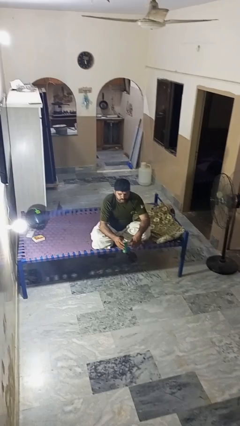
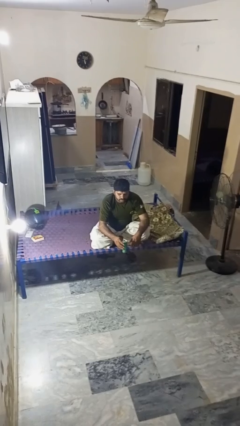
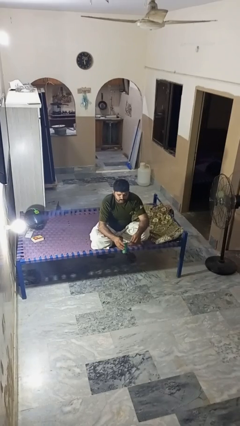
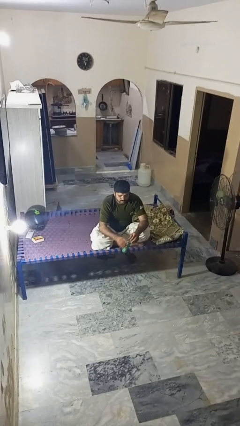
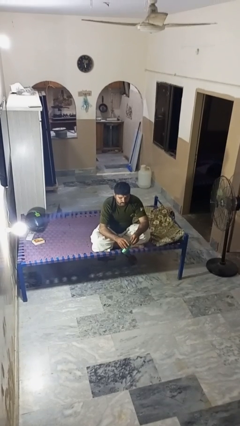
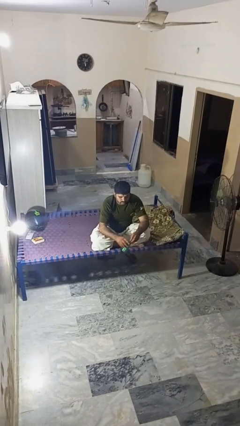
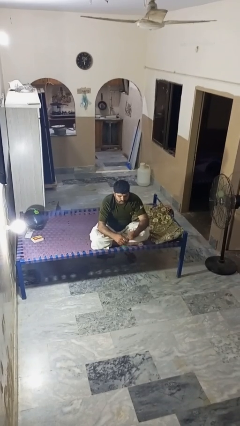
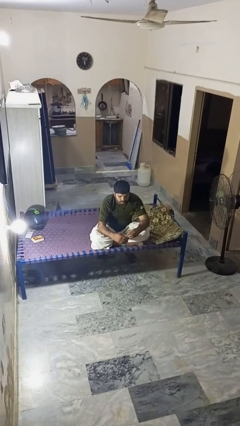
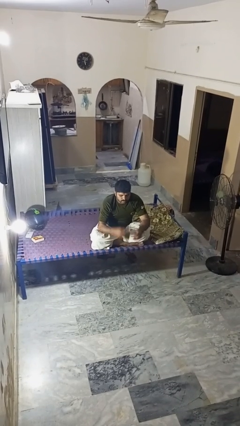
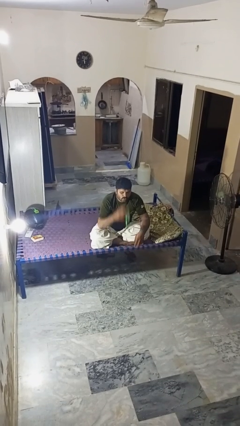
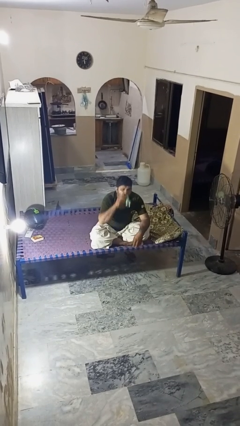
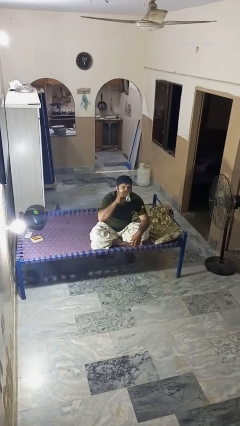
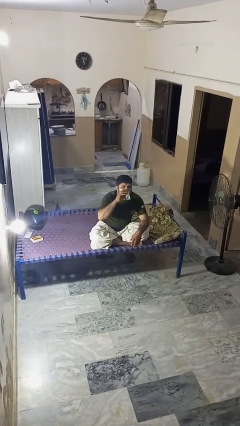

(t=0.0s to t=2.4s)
person opens beverage can

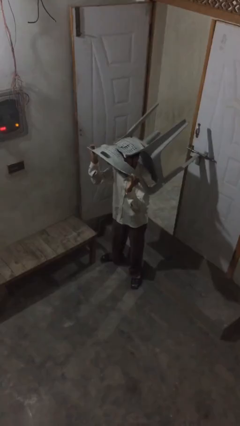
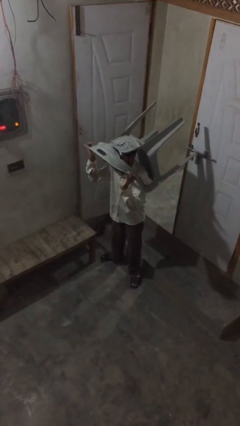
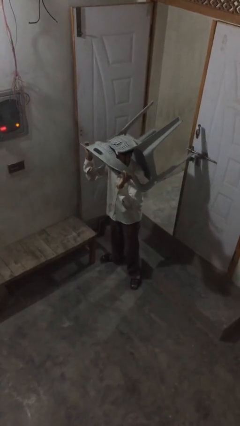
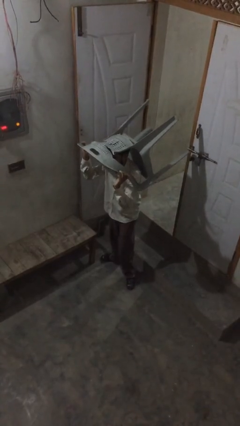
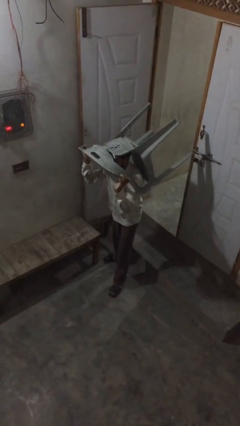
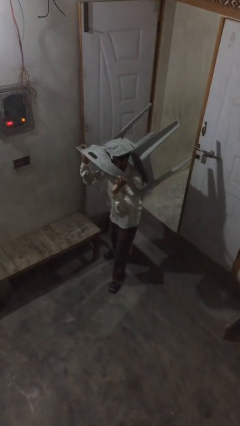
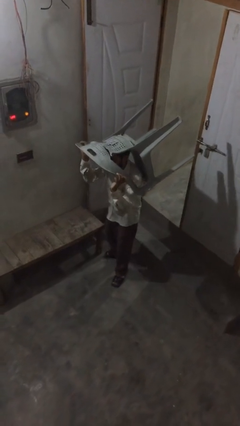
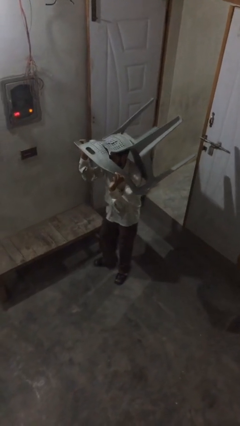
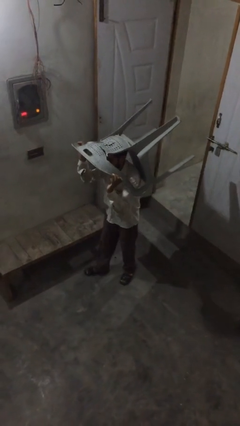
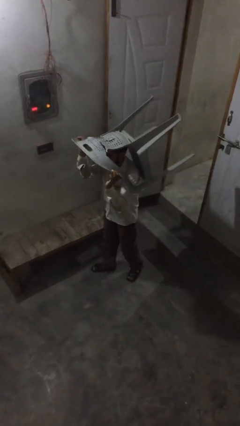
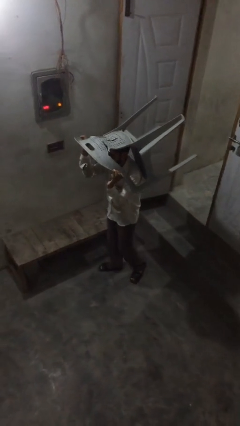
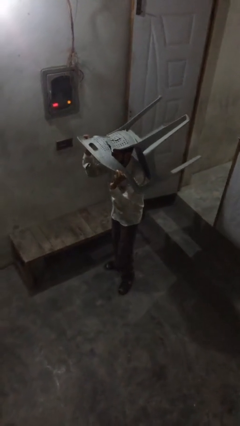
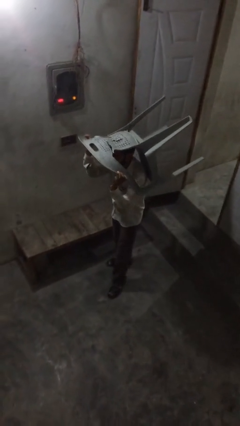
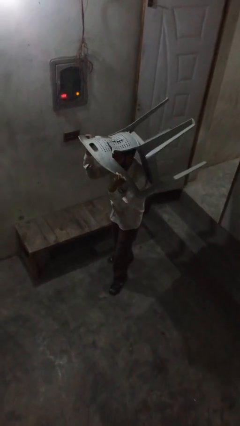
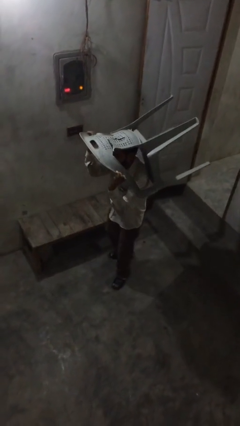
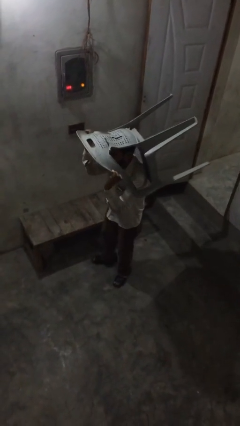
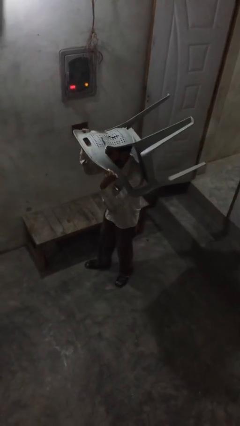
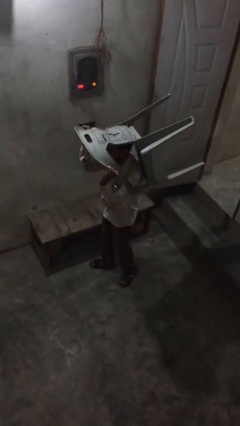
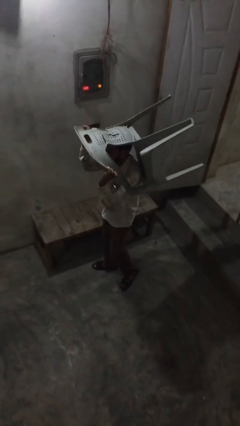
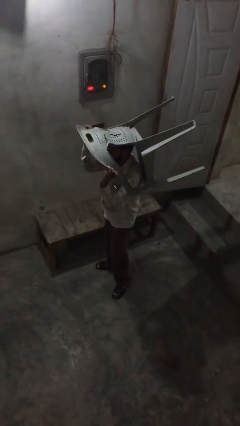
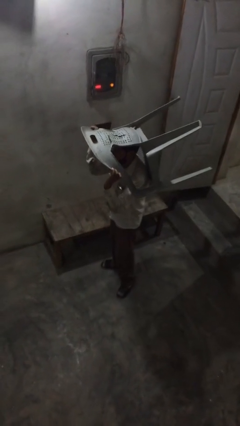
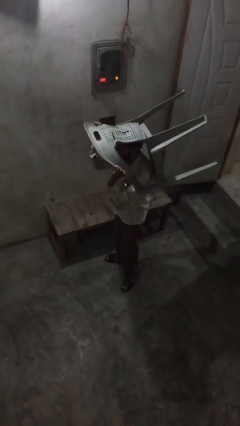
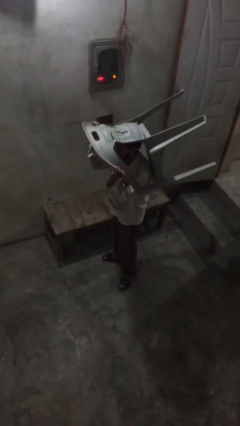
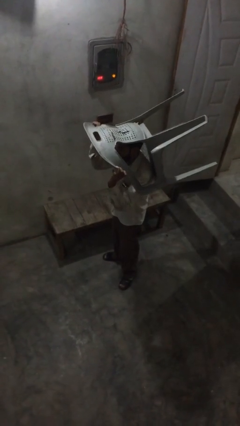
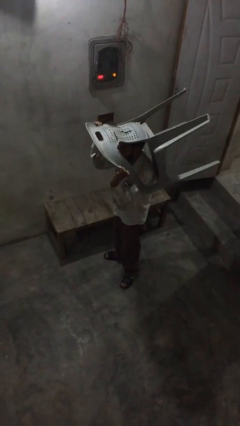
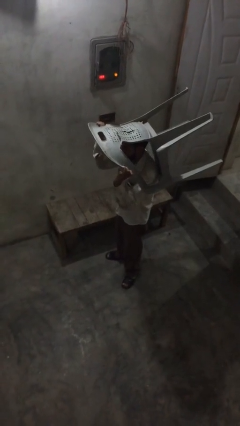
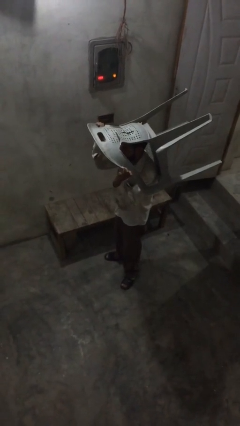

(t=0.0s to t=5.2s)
person carries heavy object

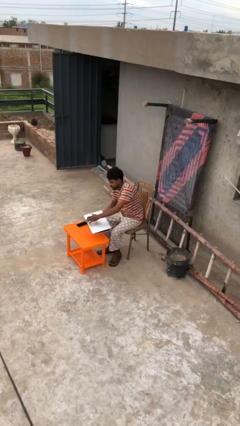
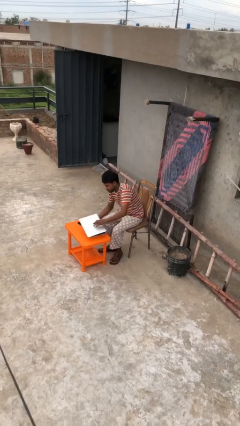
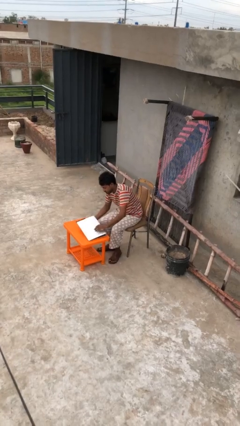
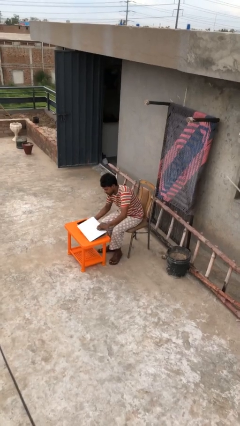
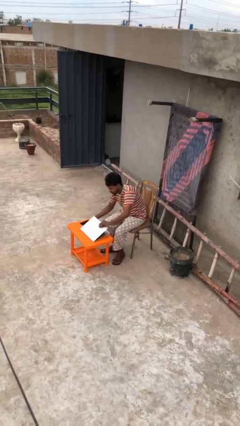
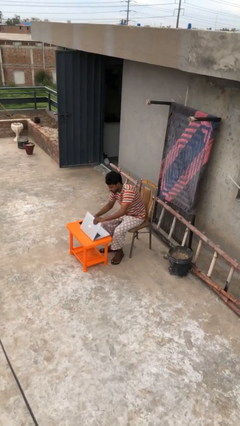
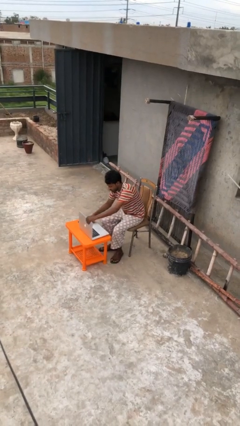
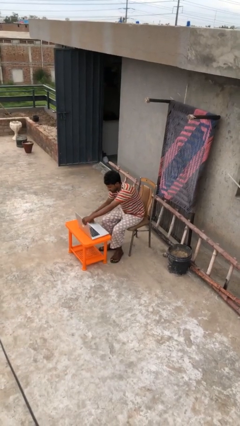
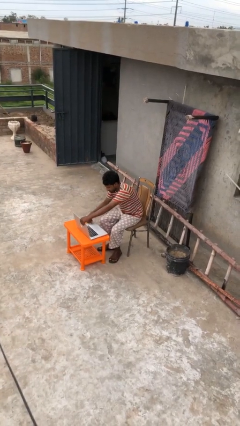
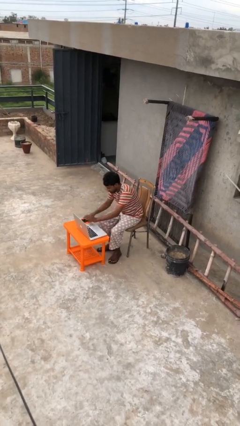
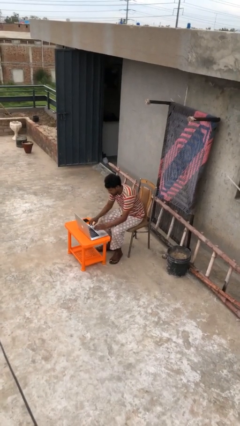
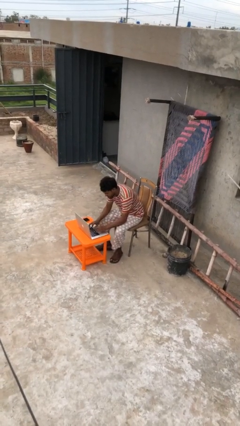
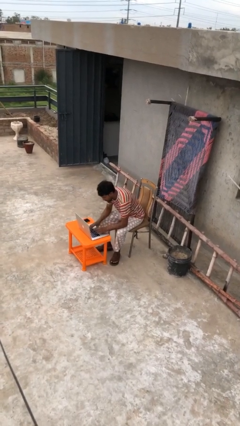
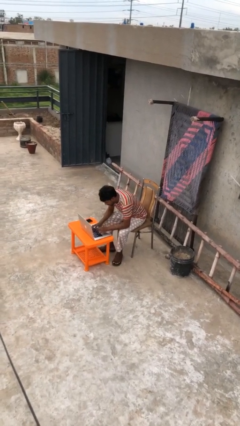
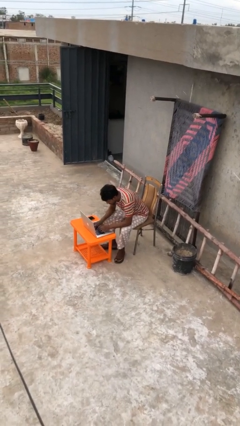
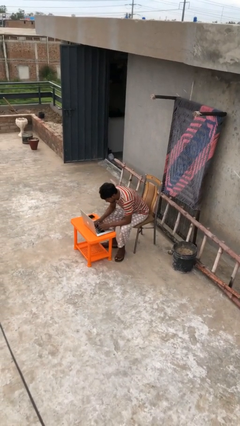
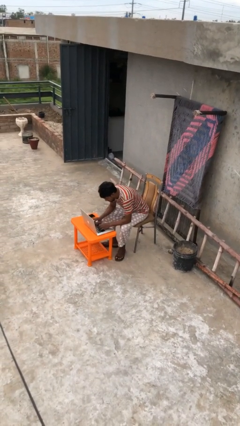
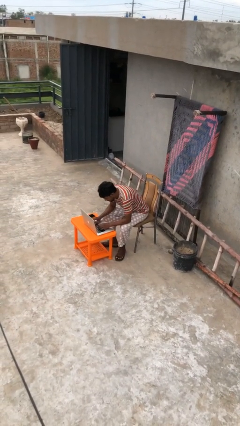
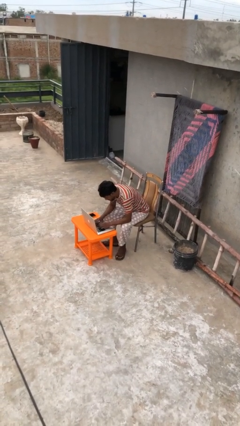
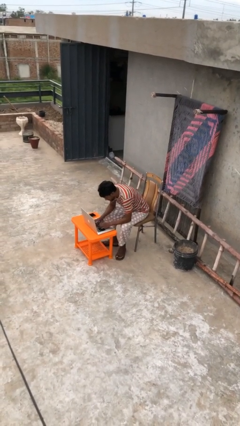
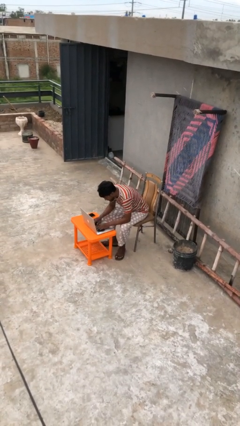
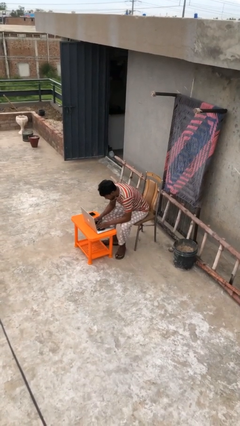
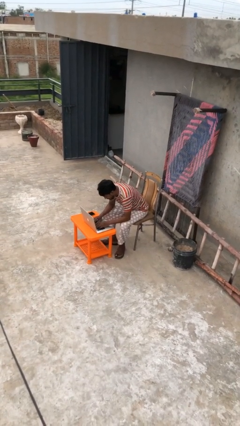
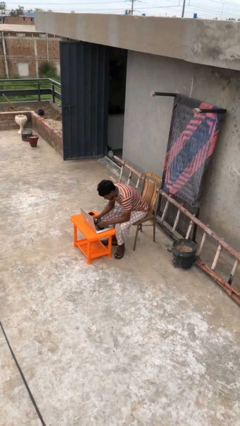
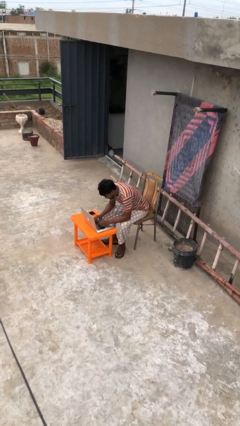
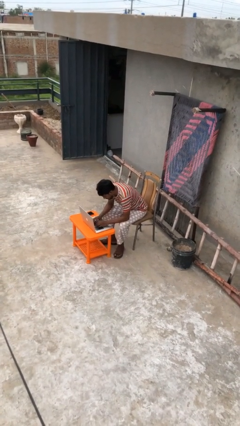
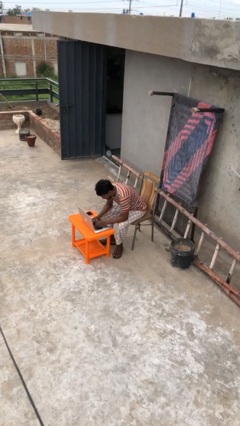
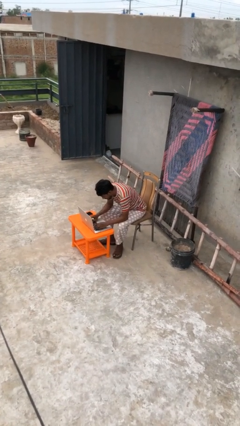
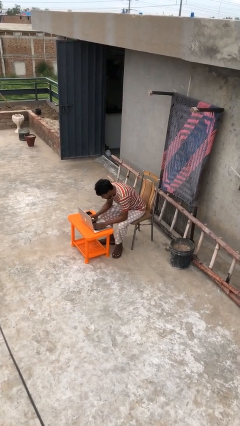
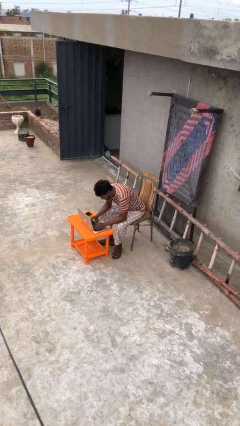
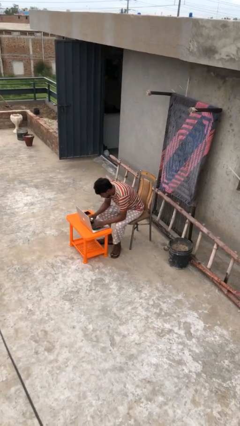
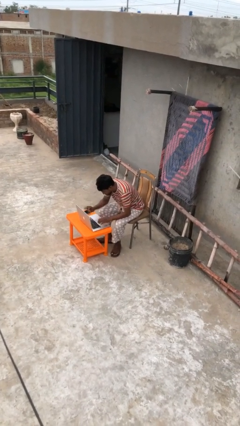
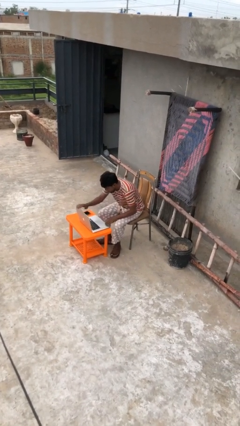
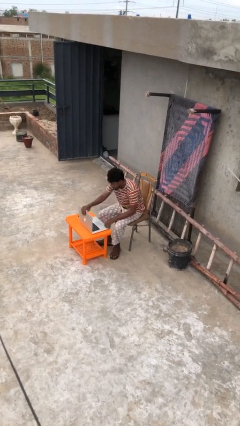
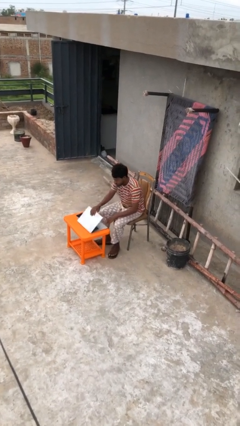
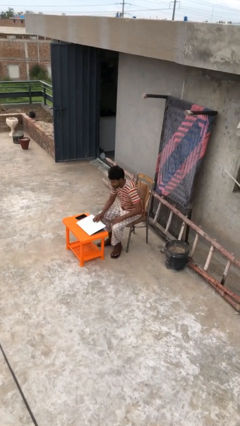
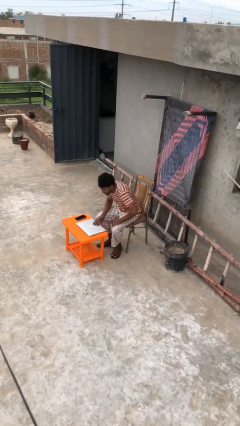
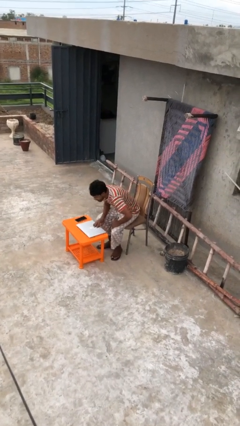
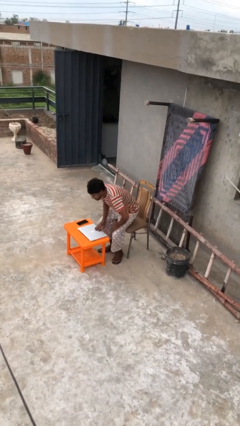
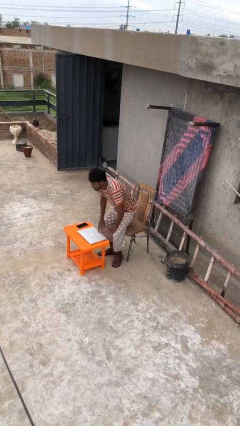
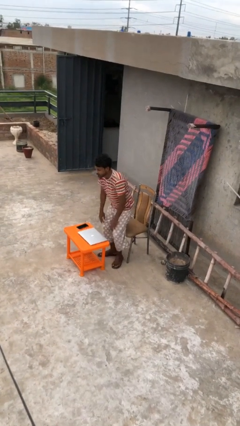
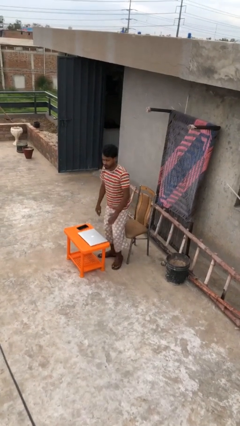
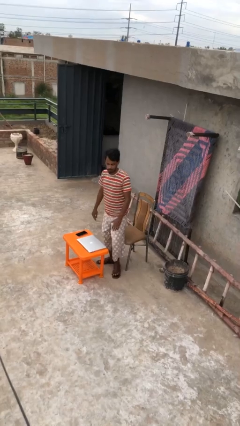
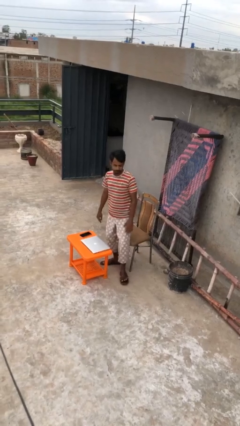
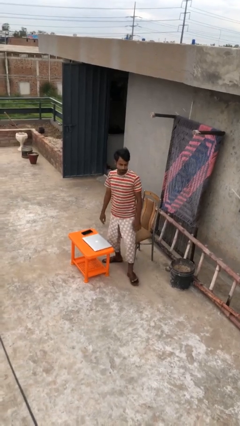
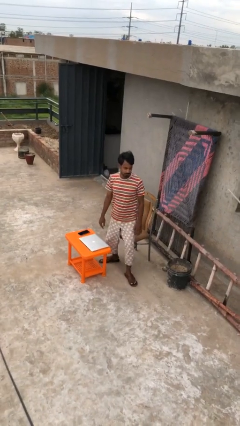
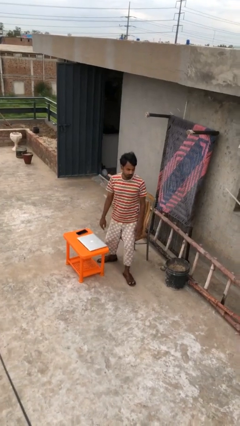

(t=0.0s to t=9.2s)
person interacts with laptop

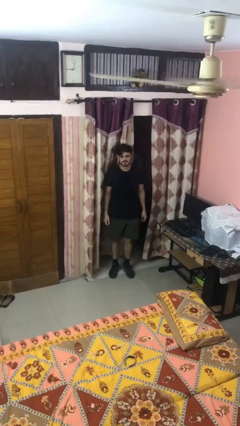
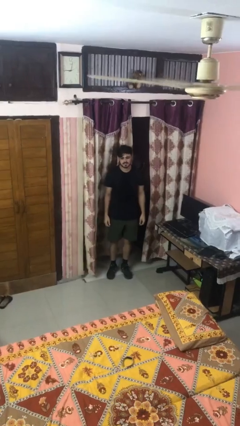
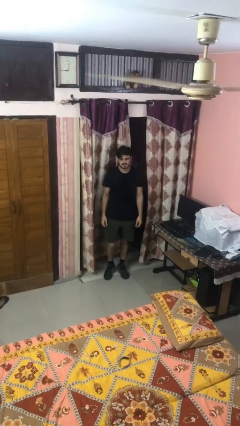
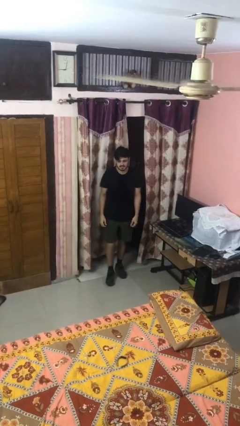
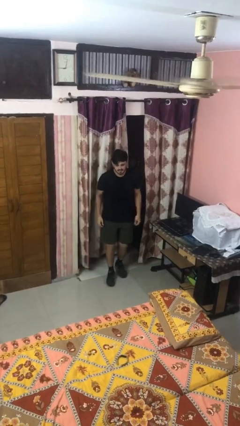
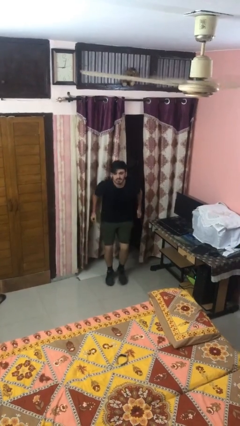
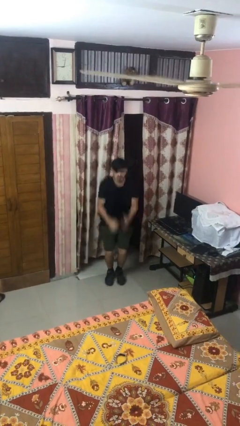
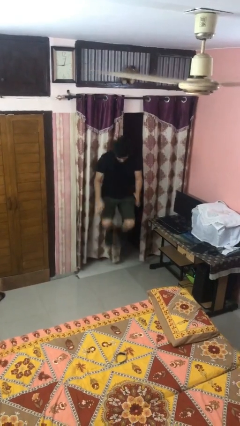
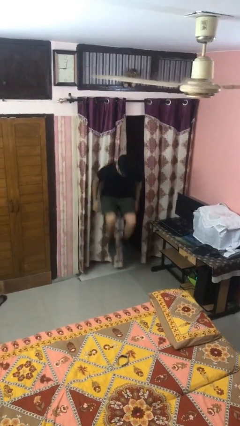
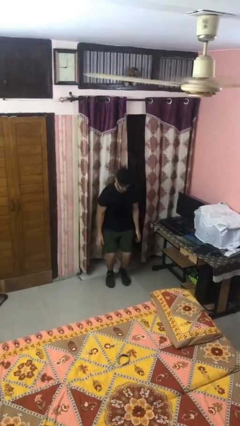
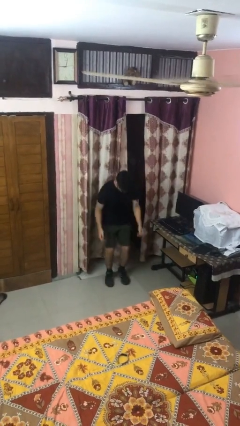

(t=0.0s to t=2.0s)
person jumps
